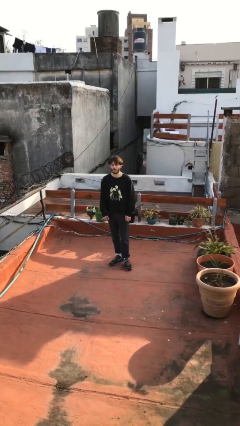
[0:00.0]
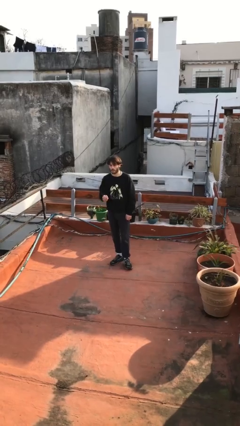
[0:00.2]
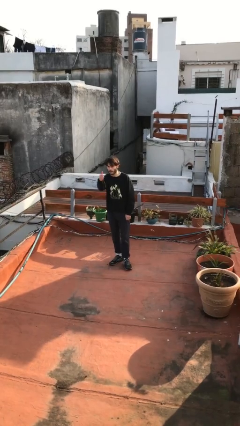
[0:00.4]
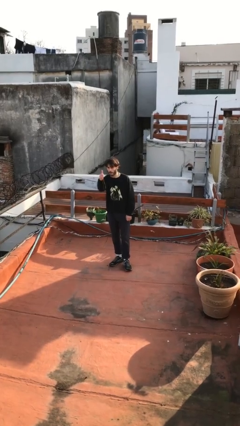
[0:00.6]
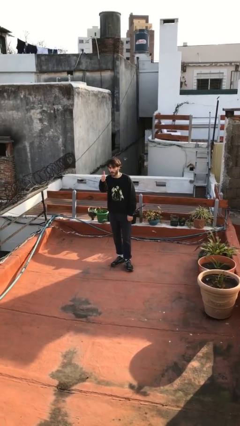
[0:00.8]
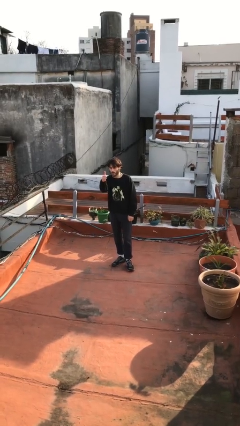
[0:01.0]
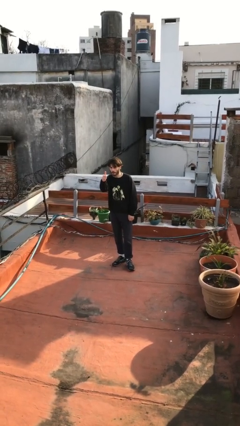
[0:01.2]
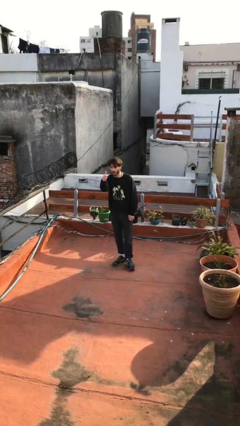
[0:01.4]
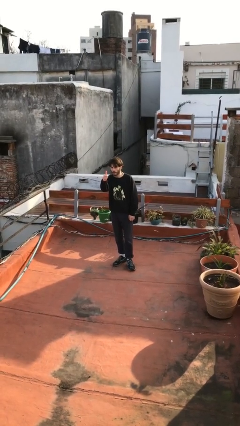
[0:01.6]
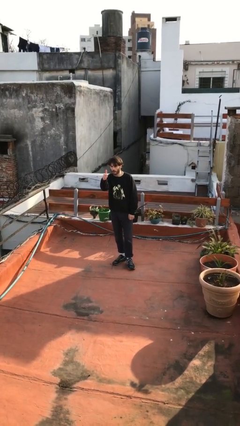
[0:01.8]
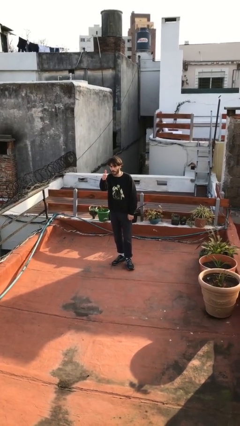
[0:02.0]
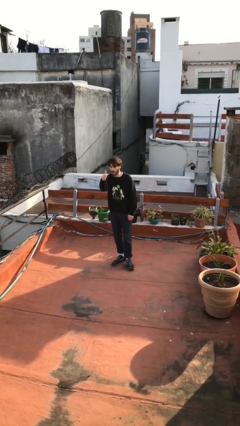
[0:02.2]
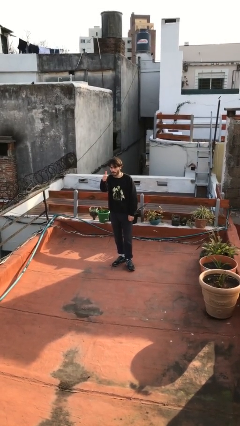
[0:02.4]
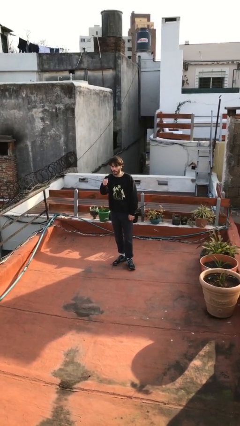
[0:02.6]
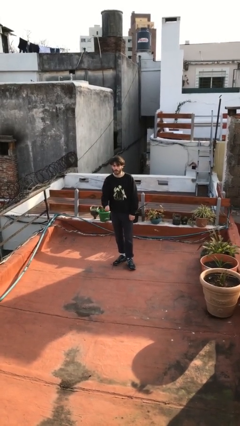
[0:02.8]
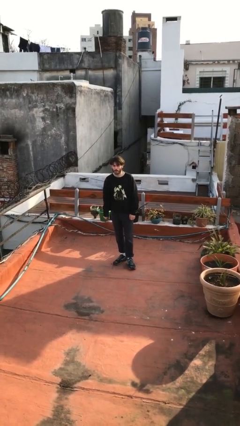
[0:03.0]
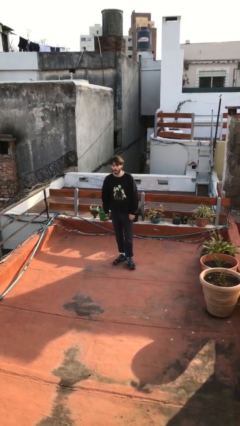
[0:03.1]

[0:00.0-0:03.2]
person gestures thumbs up

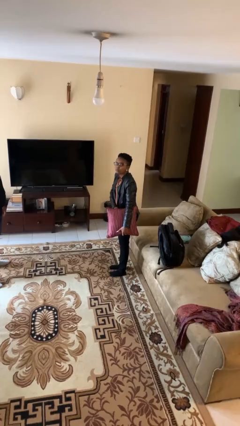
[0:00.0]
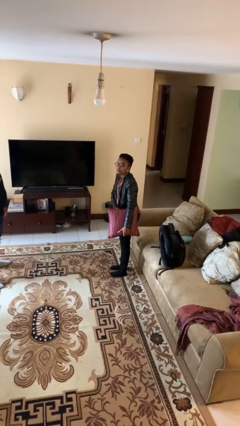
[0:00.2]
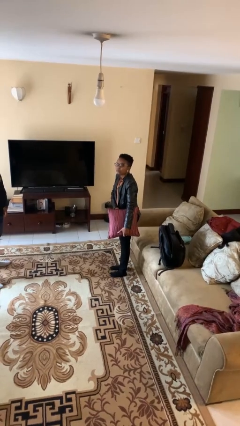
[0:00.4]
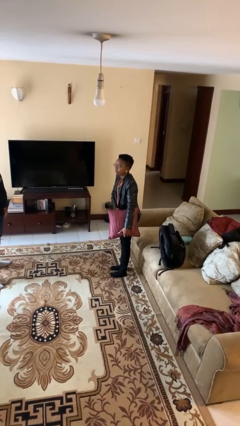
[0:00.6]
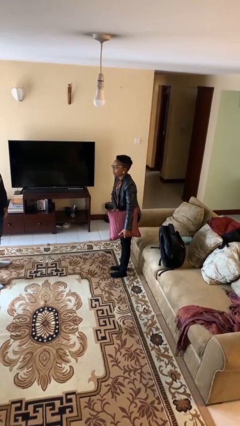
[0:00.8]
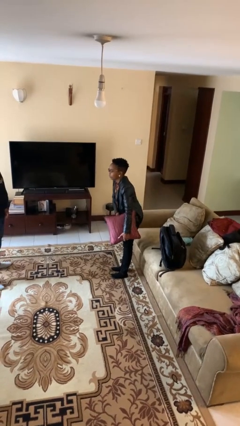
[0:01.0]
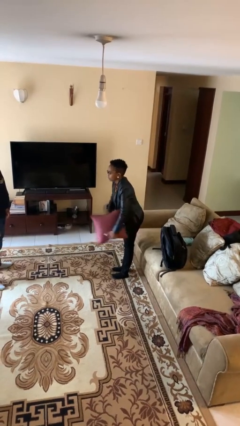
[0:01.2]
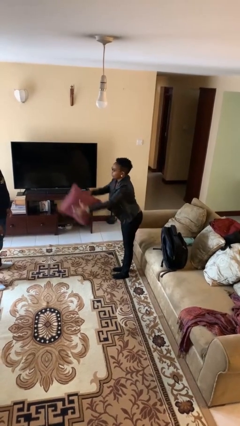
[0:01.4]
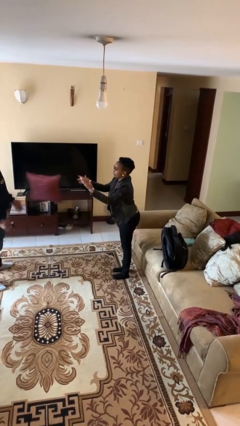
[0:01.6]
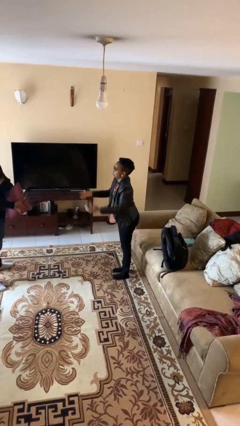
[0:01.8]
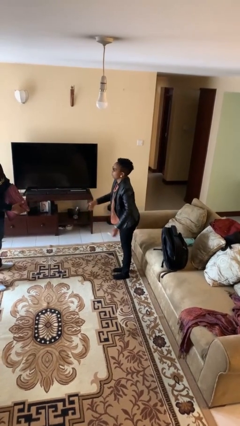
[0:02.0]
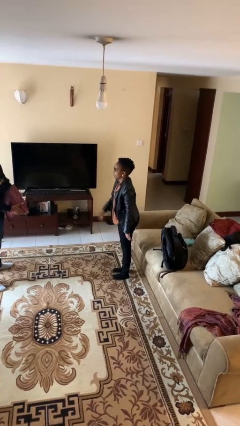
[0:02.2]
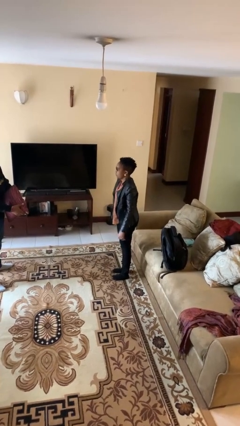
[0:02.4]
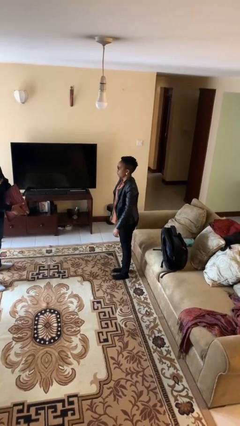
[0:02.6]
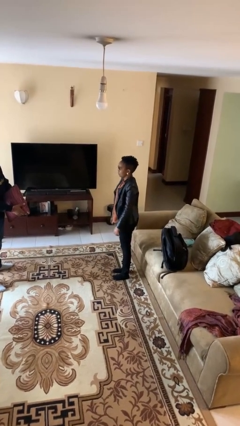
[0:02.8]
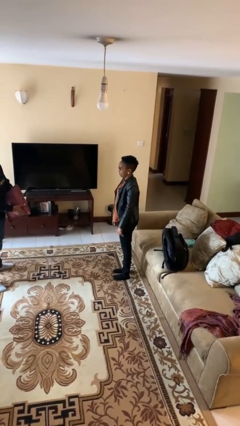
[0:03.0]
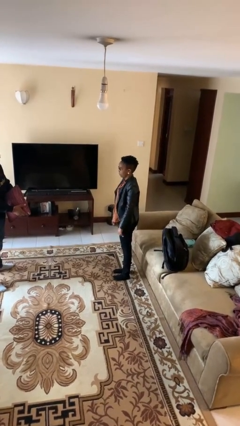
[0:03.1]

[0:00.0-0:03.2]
person throws object to person

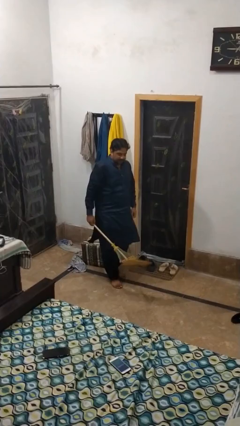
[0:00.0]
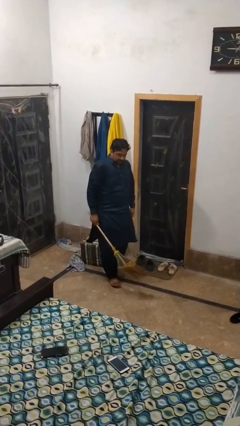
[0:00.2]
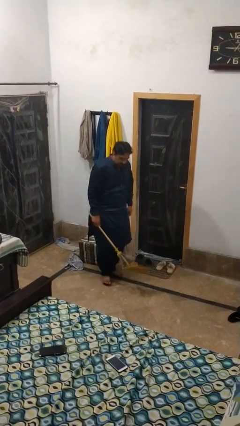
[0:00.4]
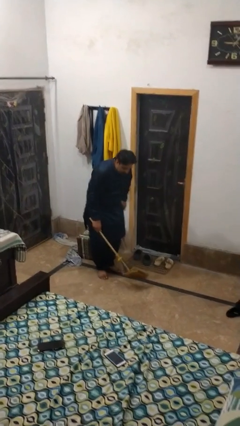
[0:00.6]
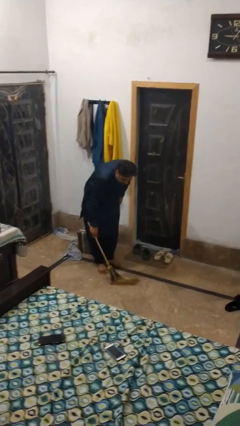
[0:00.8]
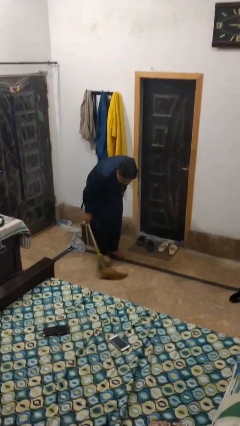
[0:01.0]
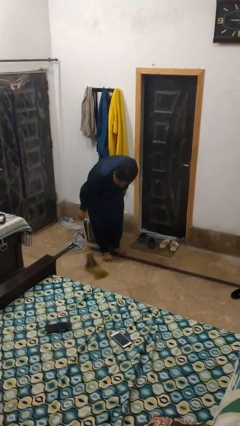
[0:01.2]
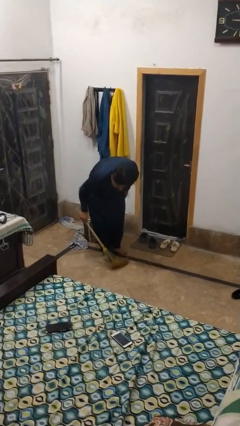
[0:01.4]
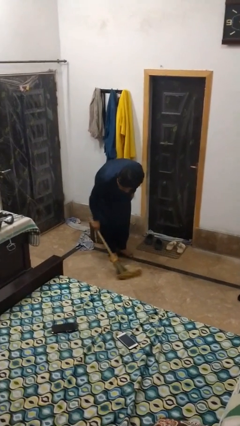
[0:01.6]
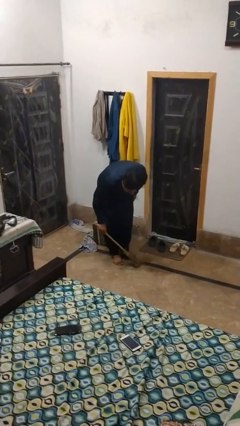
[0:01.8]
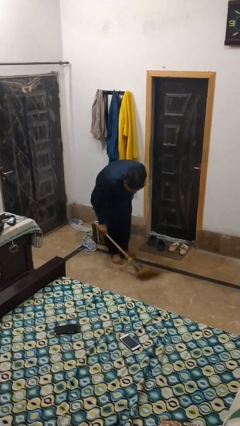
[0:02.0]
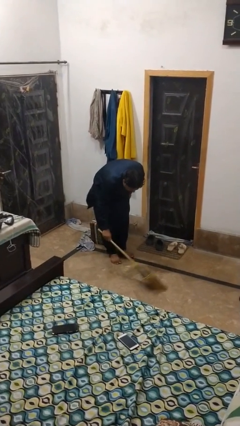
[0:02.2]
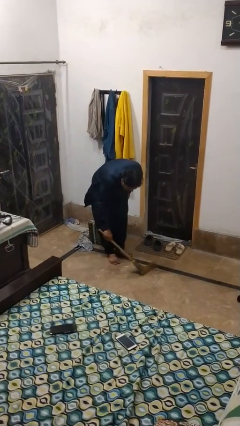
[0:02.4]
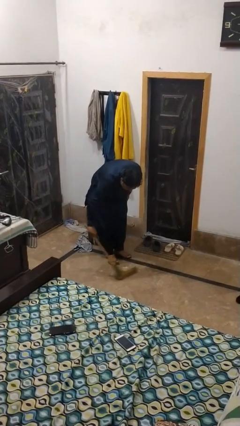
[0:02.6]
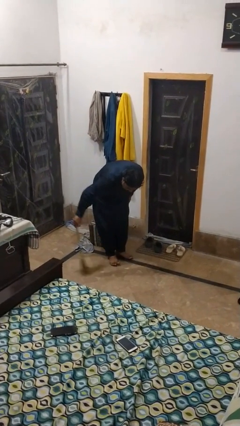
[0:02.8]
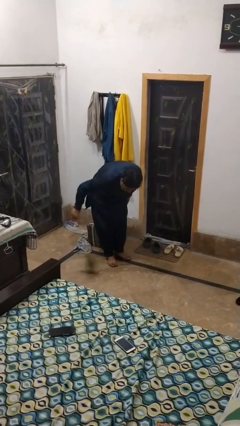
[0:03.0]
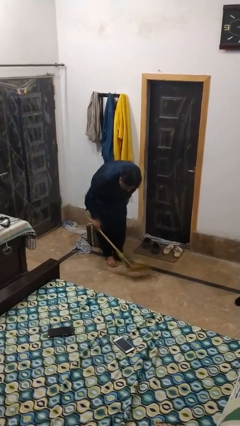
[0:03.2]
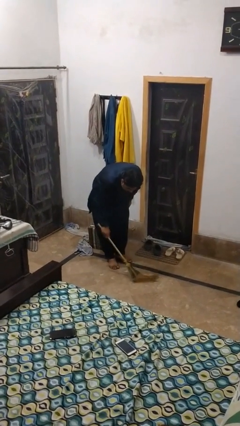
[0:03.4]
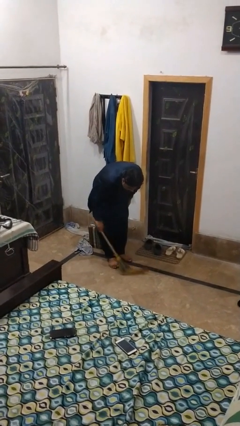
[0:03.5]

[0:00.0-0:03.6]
person sweeps floor

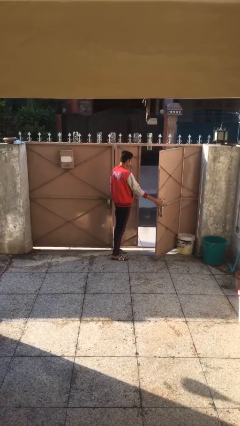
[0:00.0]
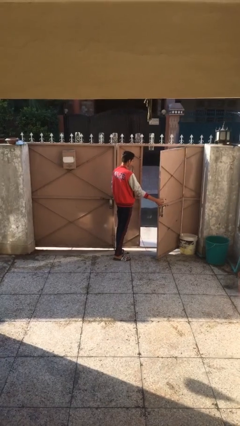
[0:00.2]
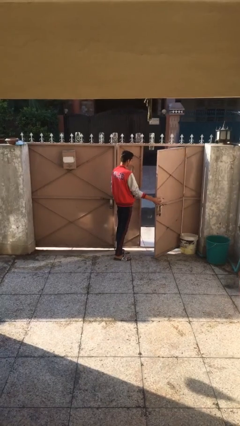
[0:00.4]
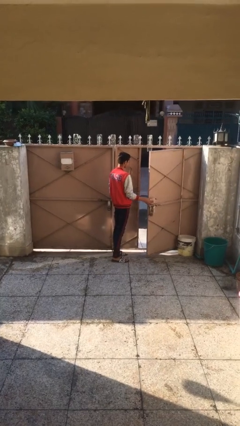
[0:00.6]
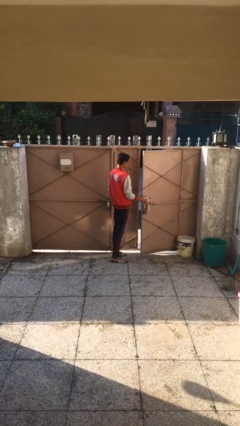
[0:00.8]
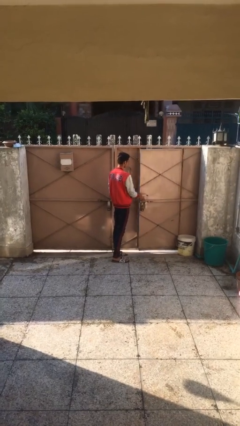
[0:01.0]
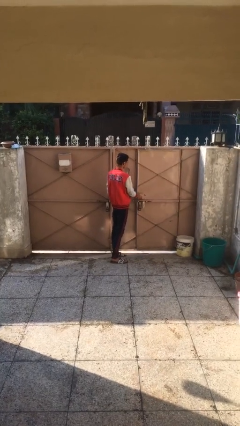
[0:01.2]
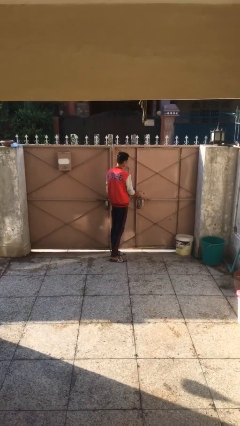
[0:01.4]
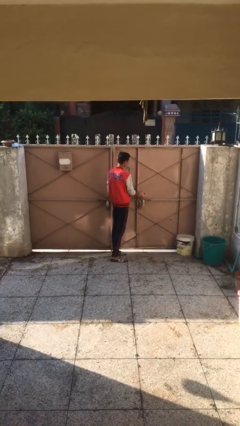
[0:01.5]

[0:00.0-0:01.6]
person closes facility door

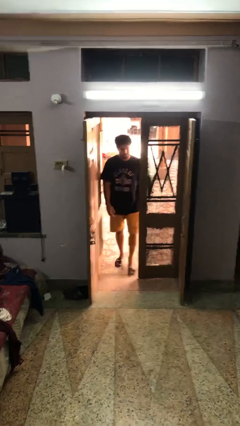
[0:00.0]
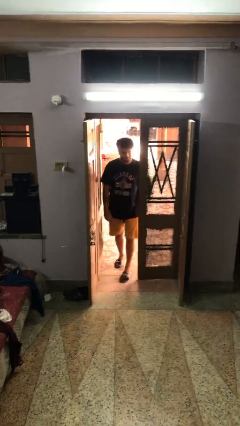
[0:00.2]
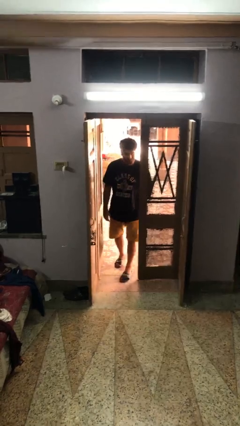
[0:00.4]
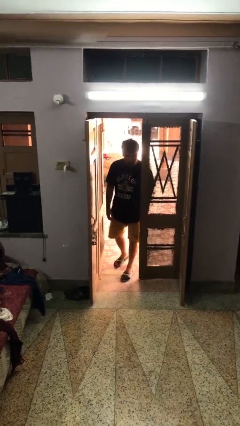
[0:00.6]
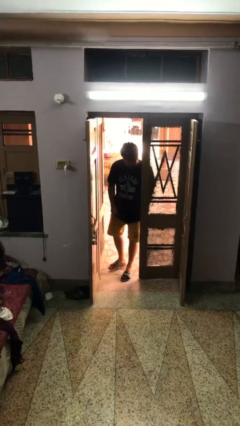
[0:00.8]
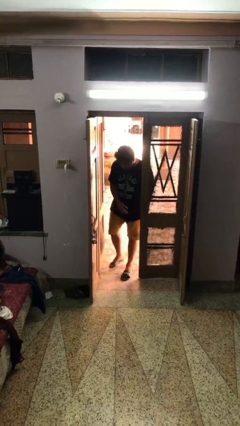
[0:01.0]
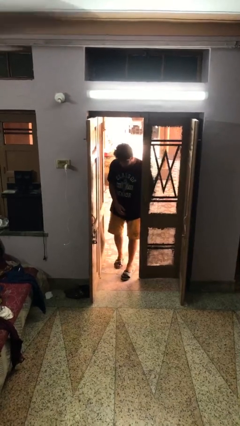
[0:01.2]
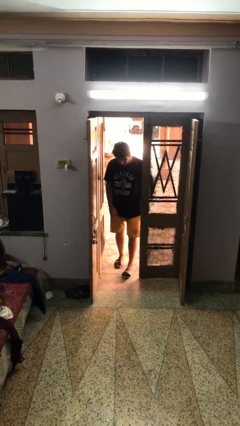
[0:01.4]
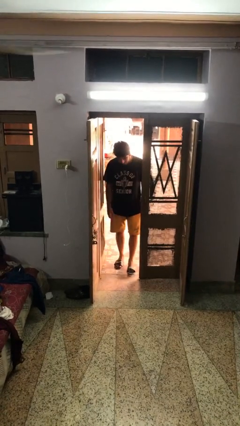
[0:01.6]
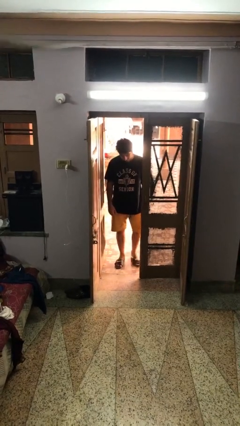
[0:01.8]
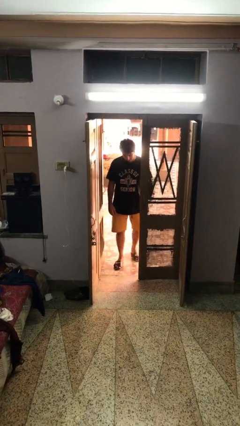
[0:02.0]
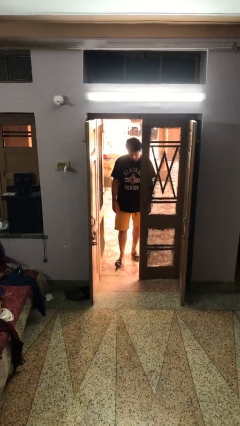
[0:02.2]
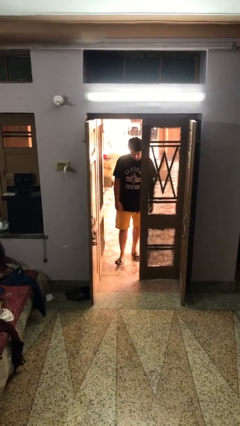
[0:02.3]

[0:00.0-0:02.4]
person bumps into wall

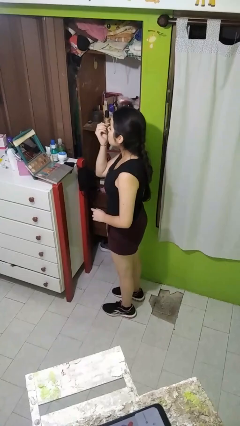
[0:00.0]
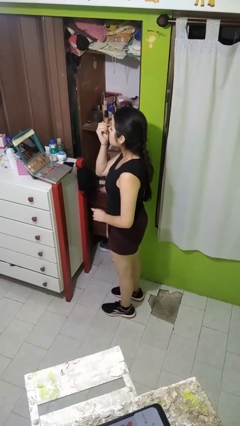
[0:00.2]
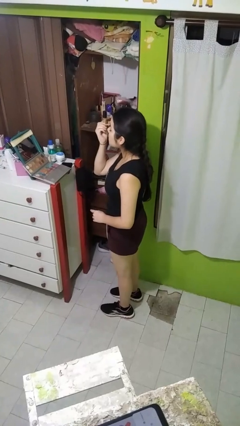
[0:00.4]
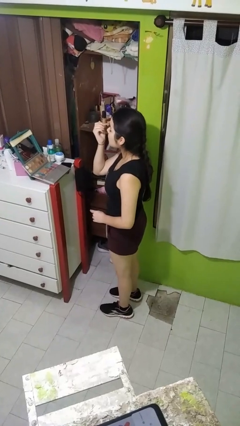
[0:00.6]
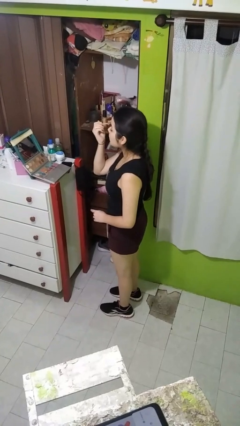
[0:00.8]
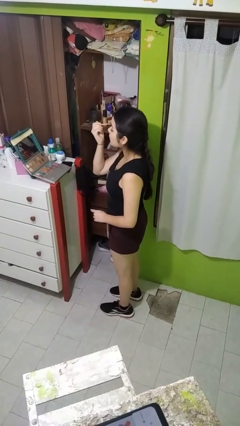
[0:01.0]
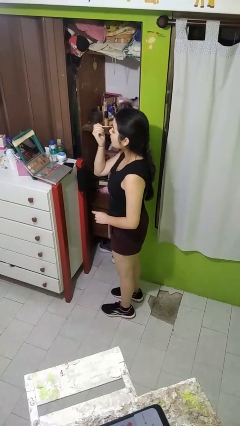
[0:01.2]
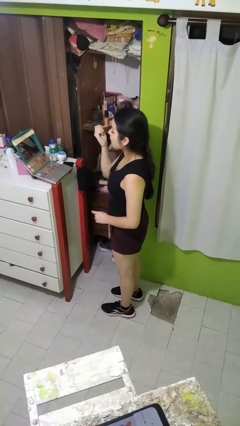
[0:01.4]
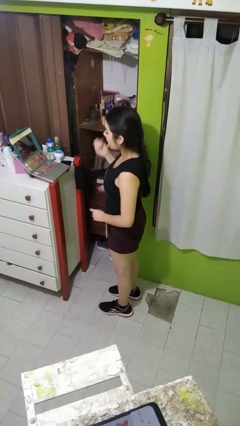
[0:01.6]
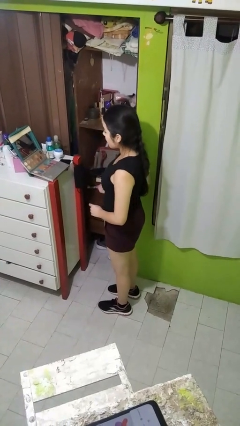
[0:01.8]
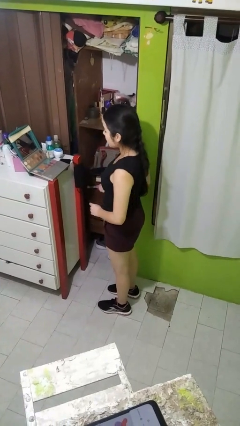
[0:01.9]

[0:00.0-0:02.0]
person applies eye makeup

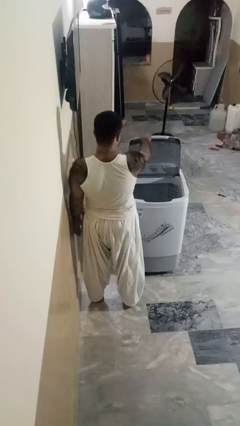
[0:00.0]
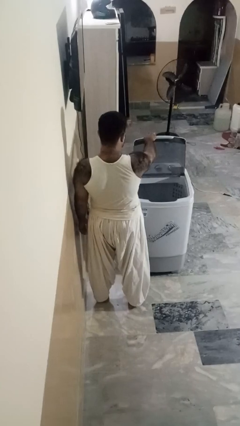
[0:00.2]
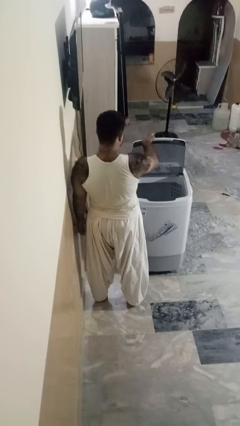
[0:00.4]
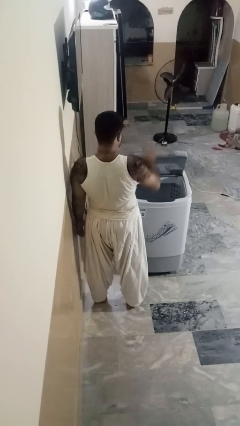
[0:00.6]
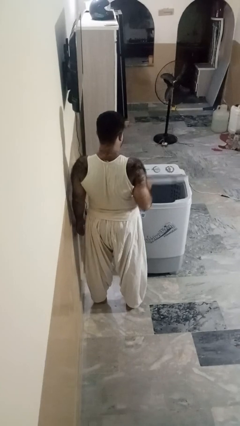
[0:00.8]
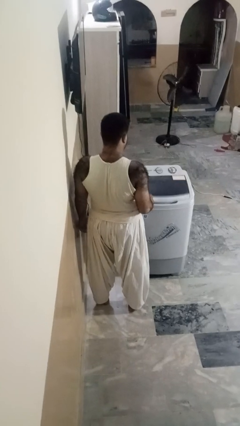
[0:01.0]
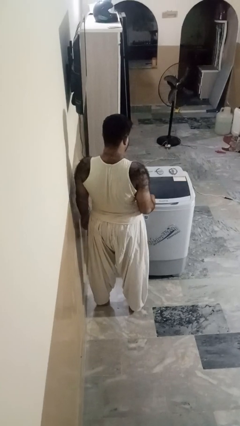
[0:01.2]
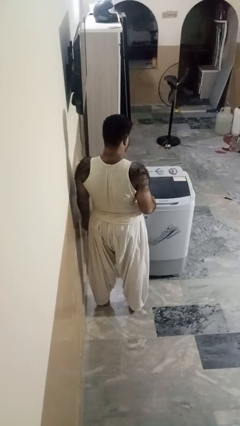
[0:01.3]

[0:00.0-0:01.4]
person closes clothes washer
